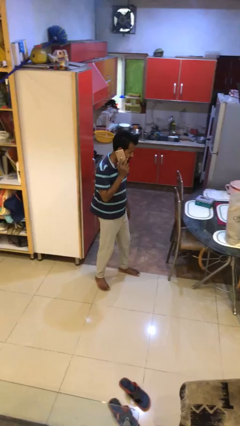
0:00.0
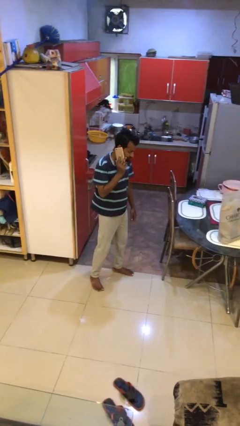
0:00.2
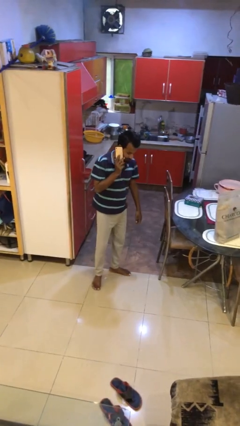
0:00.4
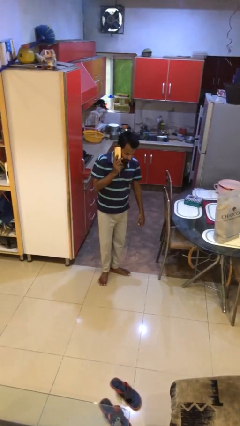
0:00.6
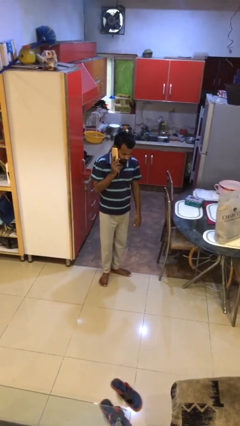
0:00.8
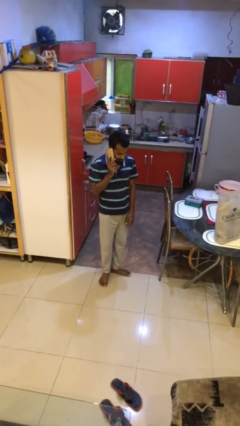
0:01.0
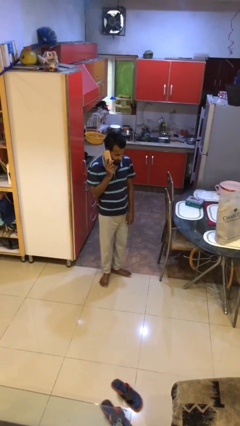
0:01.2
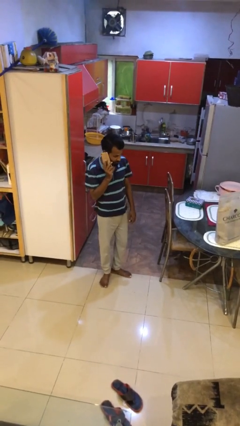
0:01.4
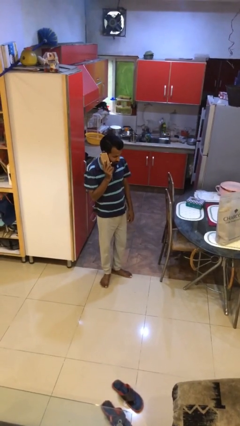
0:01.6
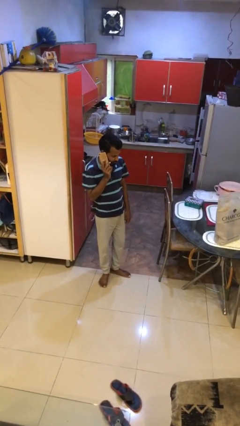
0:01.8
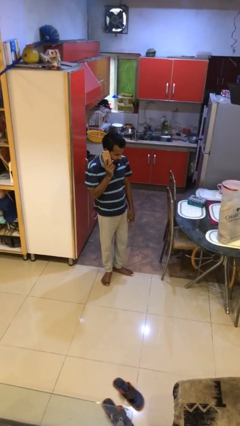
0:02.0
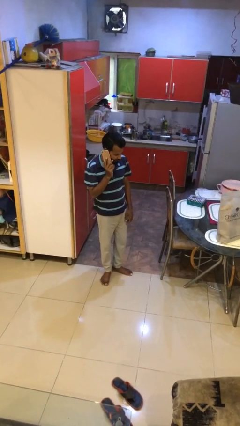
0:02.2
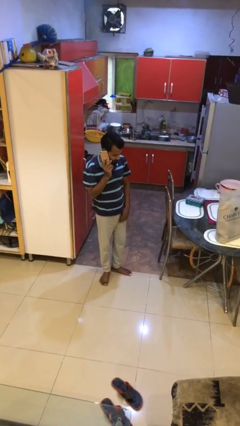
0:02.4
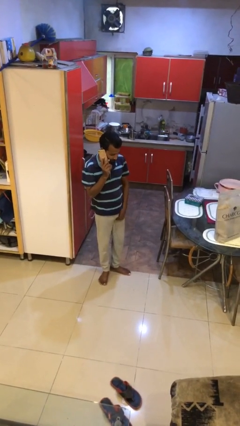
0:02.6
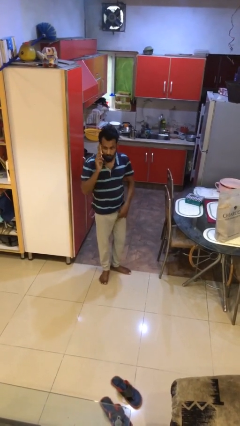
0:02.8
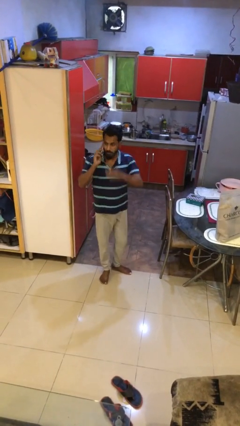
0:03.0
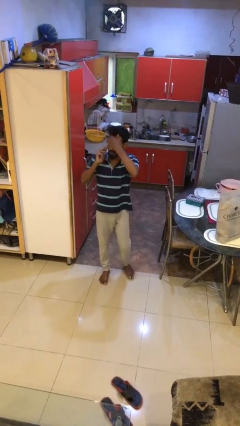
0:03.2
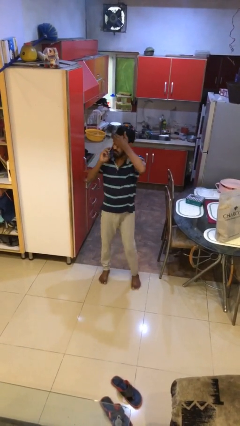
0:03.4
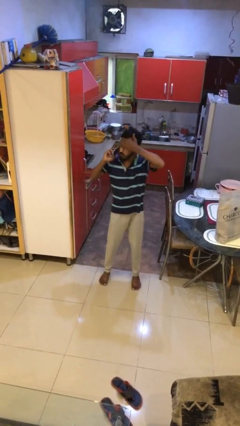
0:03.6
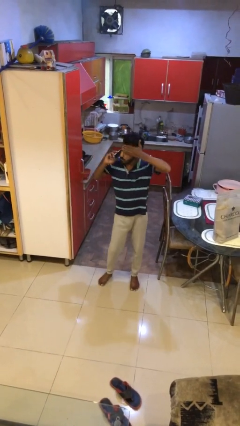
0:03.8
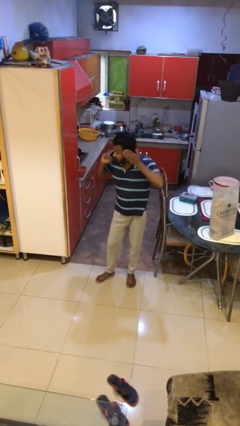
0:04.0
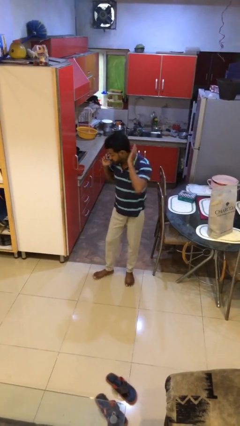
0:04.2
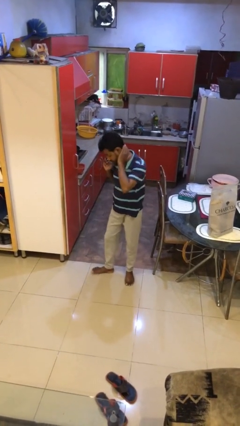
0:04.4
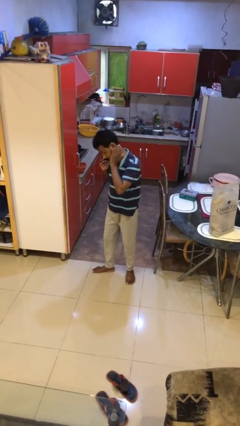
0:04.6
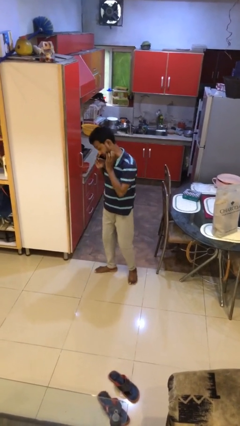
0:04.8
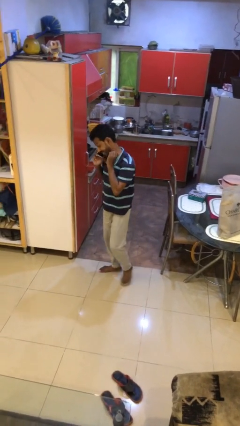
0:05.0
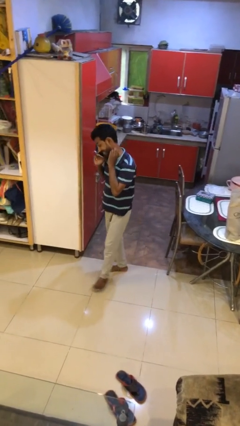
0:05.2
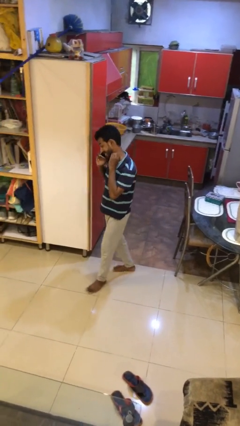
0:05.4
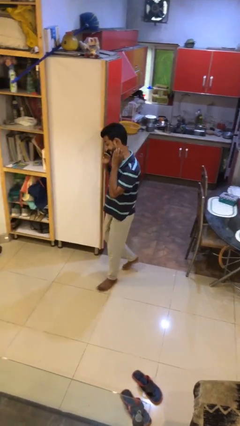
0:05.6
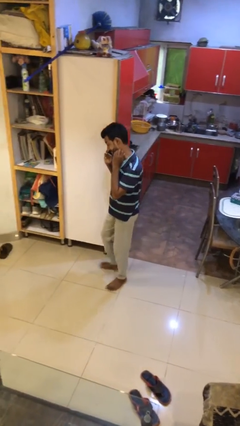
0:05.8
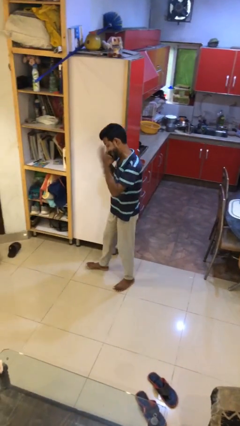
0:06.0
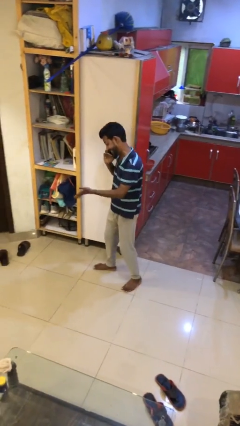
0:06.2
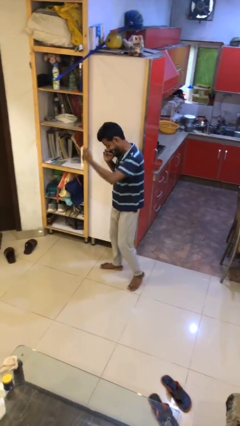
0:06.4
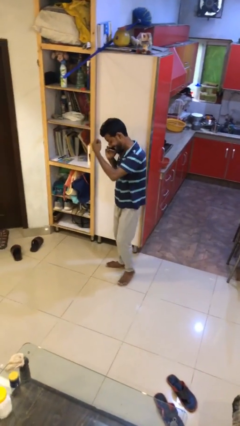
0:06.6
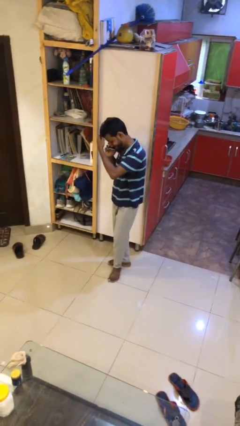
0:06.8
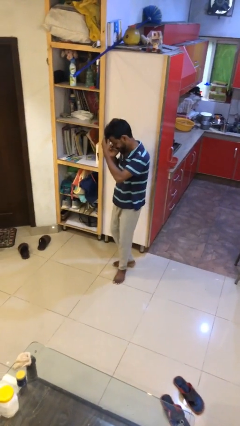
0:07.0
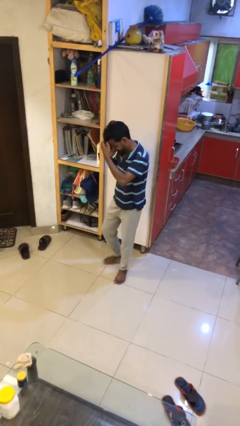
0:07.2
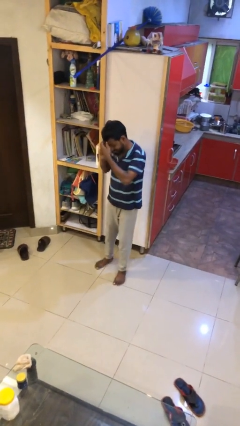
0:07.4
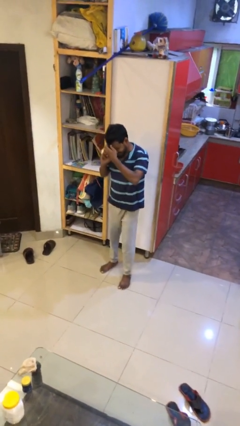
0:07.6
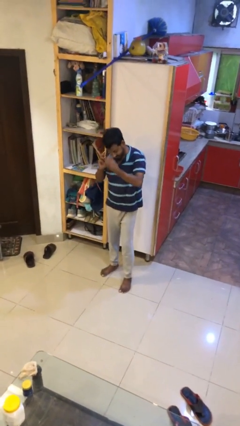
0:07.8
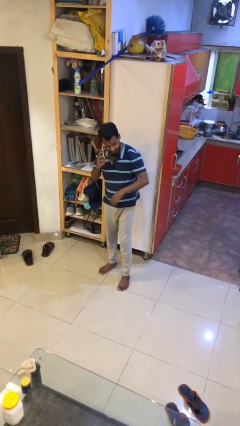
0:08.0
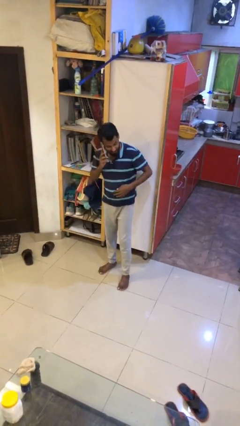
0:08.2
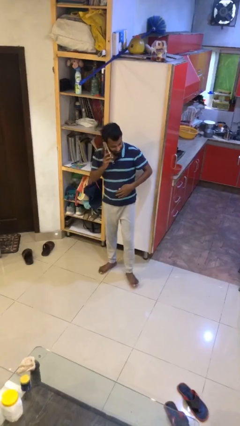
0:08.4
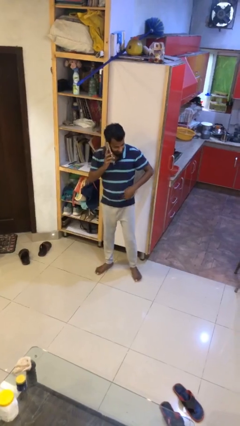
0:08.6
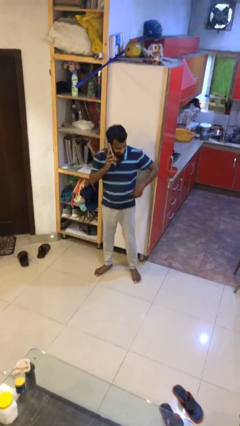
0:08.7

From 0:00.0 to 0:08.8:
person talks on phone

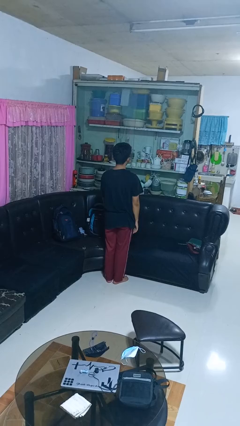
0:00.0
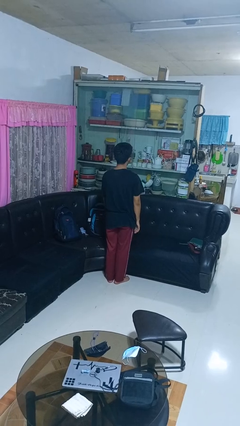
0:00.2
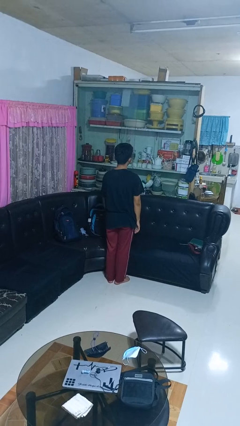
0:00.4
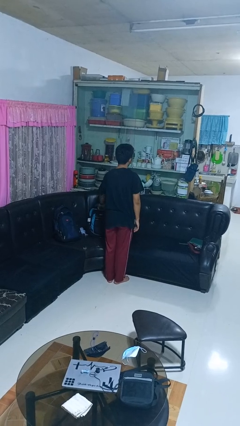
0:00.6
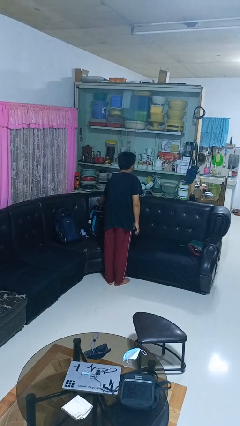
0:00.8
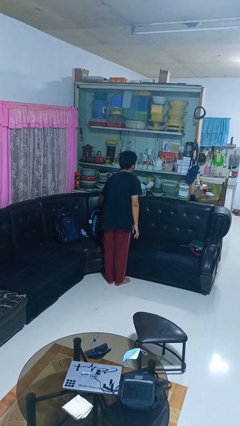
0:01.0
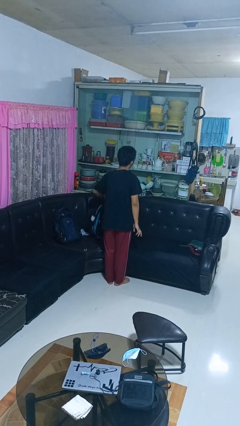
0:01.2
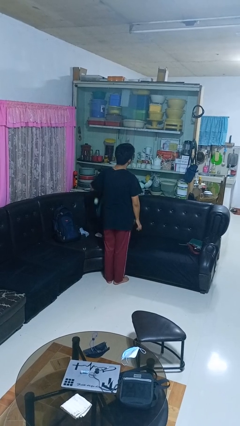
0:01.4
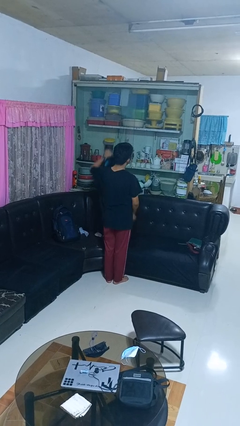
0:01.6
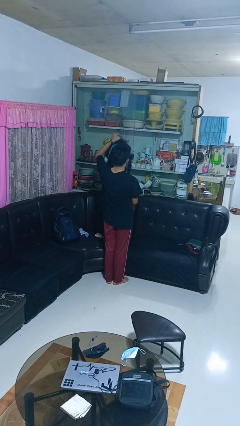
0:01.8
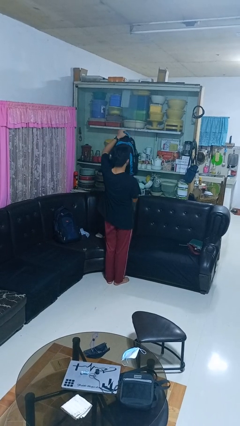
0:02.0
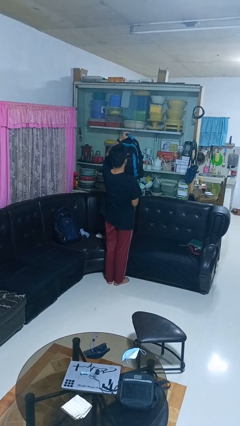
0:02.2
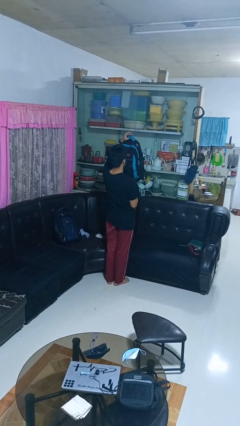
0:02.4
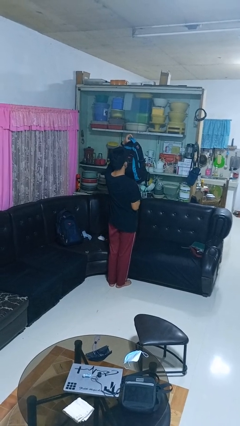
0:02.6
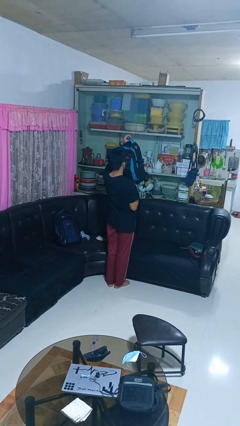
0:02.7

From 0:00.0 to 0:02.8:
person picks up object from couch

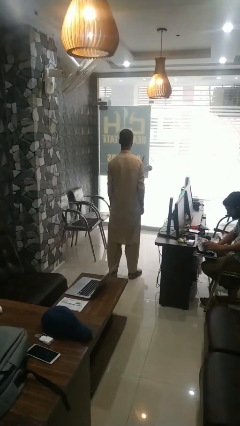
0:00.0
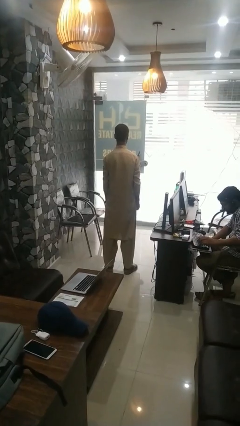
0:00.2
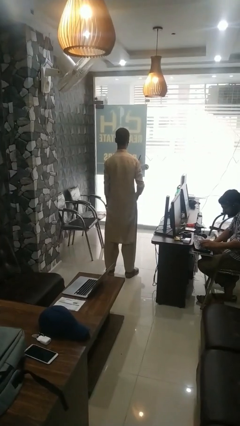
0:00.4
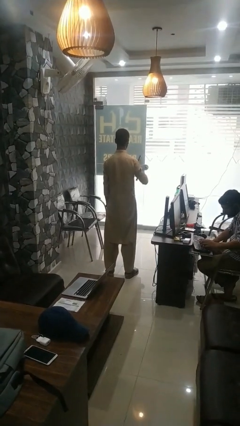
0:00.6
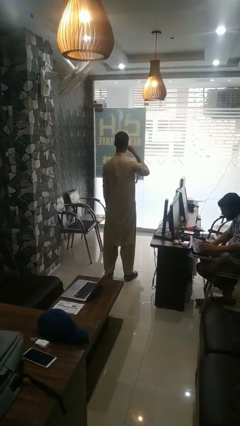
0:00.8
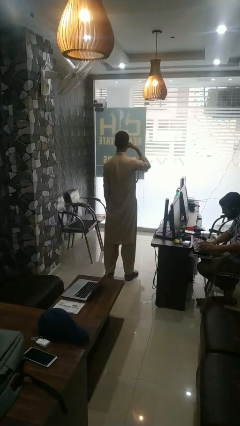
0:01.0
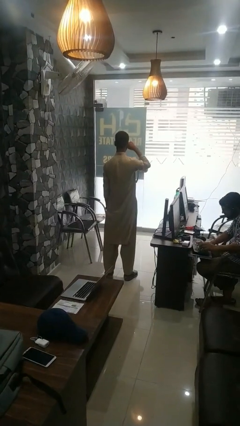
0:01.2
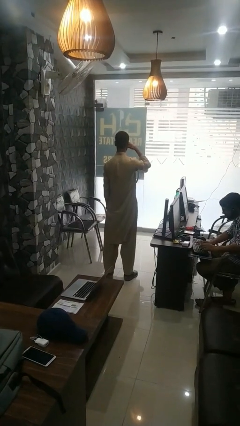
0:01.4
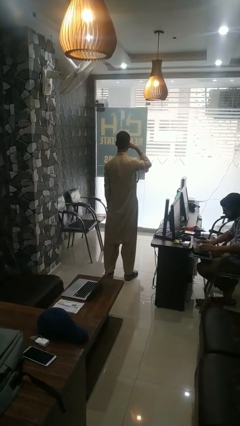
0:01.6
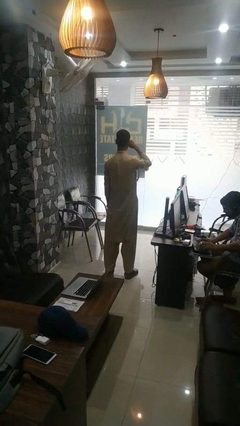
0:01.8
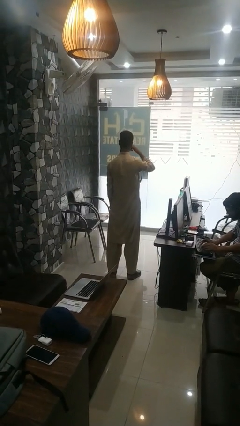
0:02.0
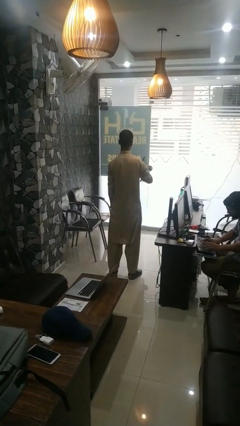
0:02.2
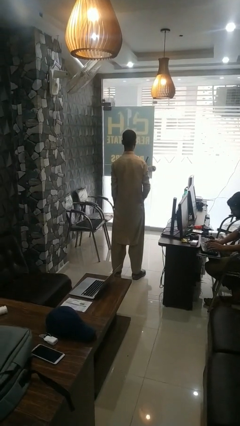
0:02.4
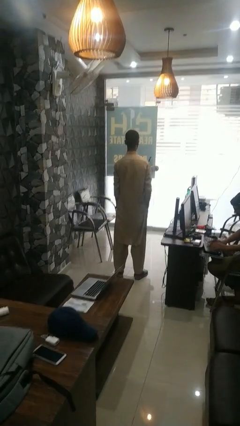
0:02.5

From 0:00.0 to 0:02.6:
person rubs eyes

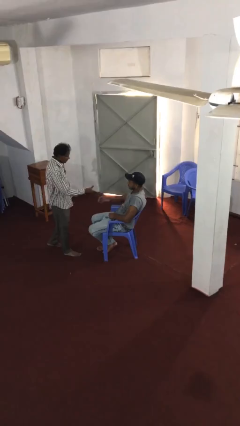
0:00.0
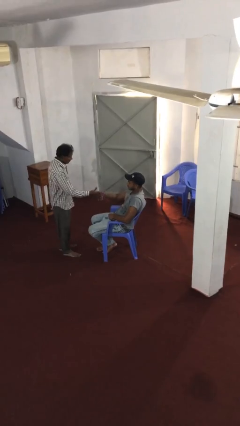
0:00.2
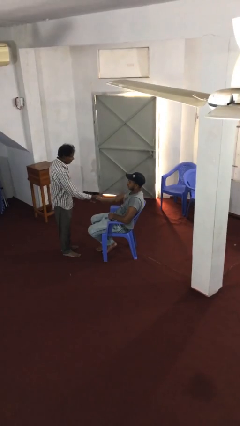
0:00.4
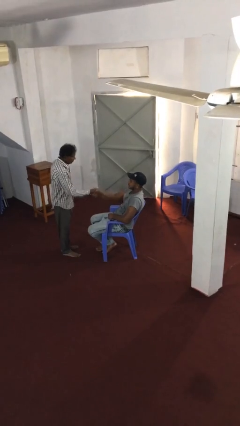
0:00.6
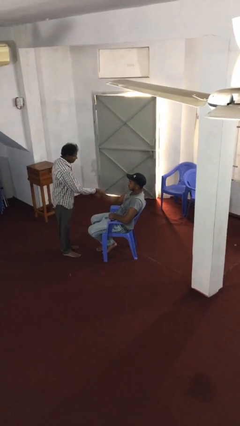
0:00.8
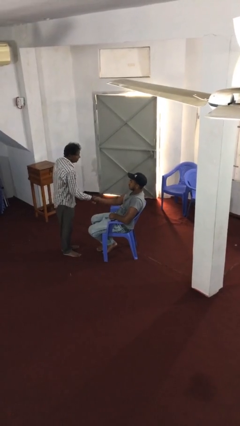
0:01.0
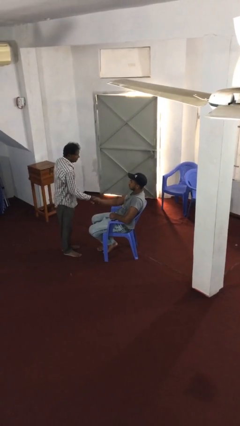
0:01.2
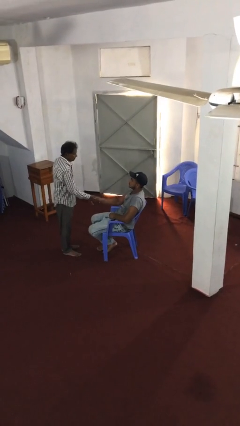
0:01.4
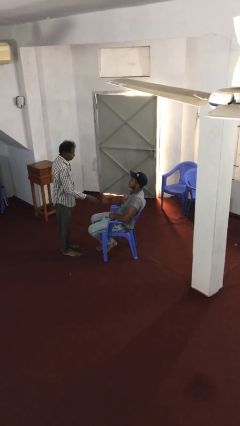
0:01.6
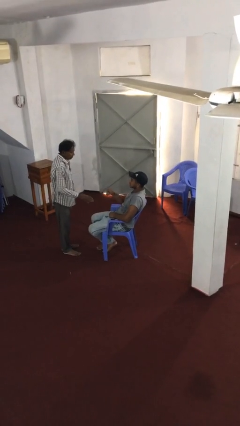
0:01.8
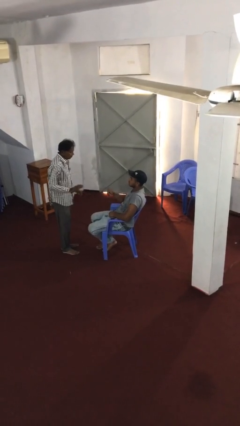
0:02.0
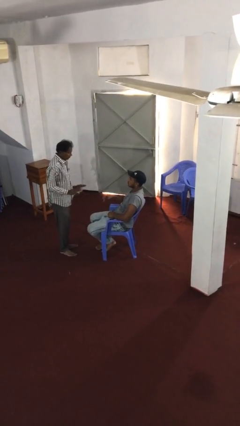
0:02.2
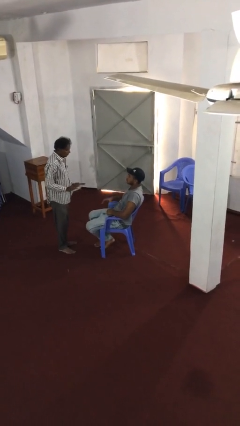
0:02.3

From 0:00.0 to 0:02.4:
person shakes hand

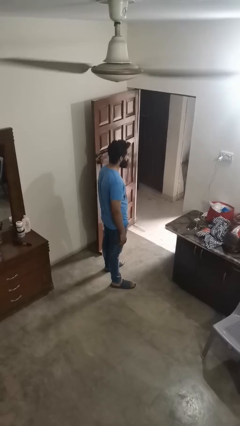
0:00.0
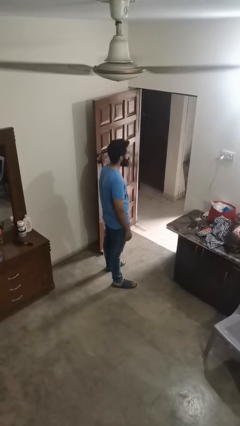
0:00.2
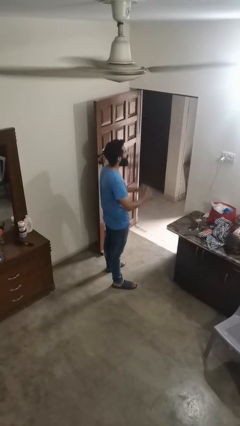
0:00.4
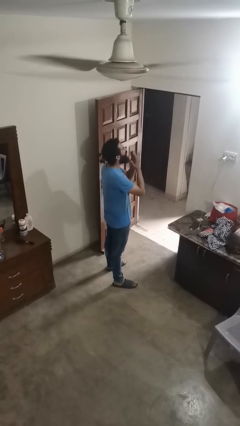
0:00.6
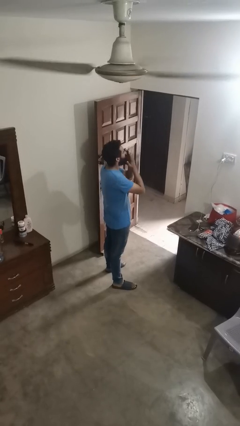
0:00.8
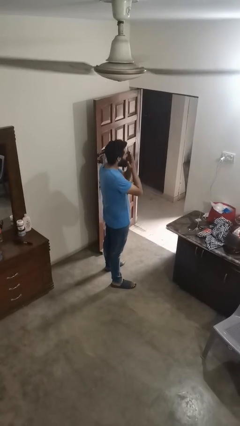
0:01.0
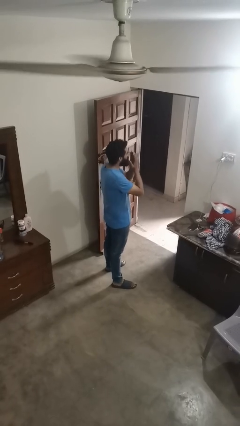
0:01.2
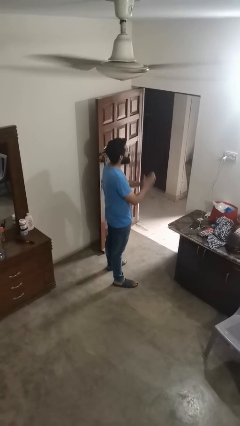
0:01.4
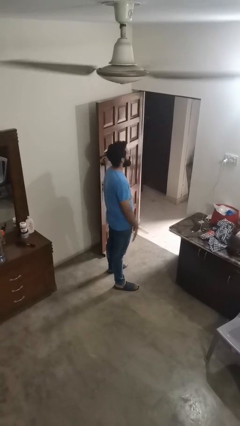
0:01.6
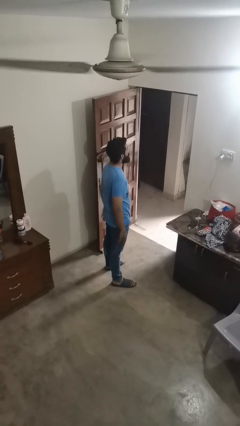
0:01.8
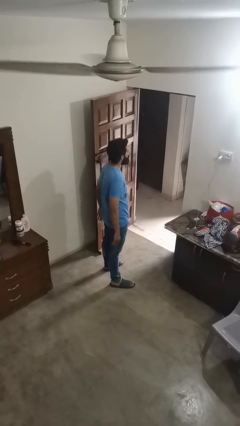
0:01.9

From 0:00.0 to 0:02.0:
person sneezes into hand
